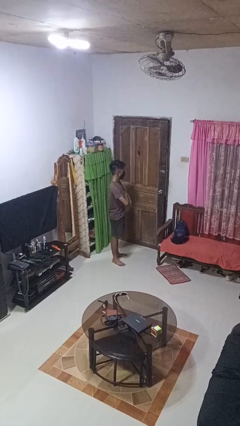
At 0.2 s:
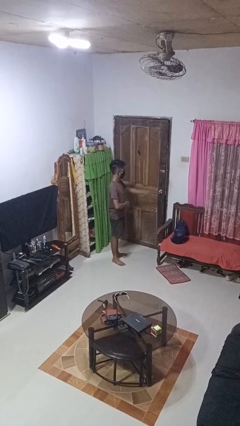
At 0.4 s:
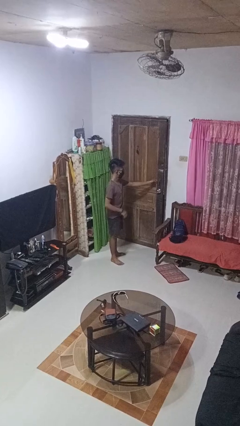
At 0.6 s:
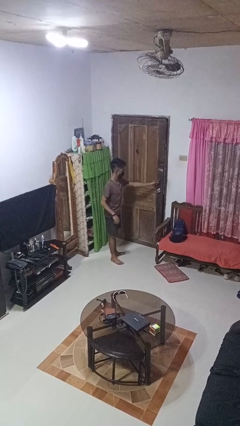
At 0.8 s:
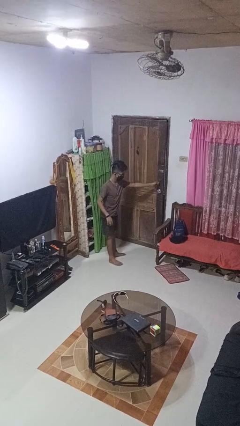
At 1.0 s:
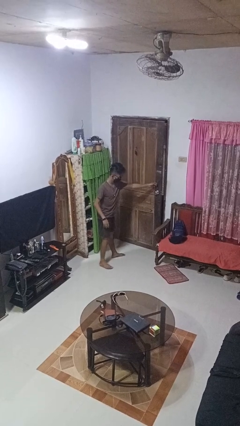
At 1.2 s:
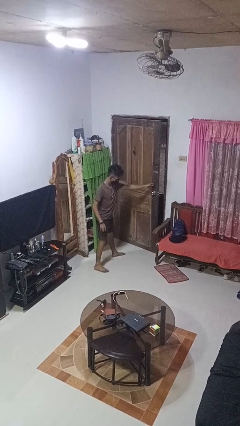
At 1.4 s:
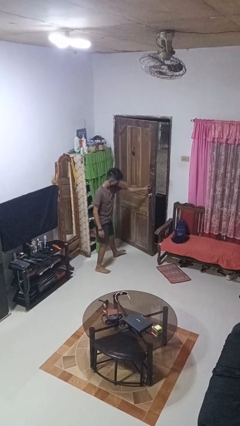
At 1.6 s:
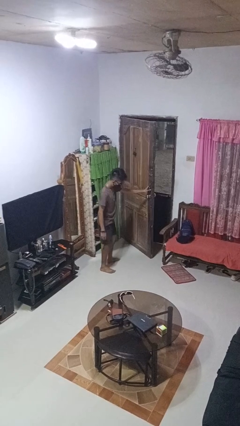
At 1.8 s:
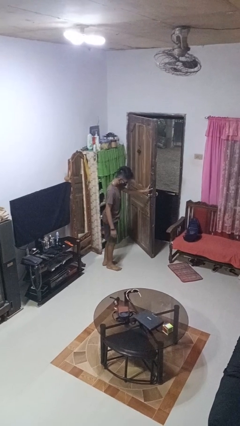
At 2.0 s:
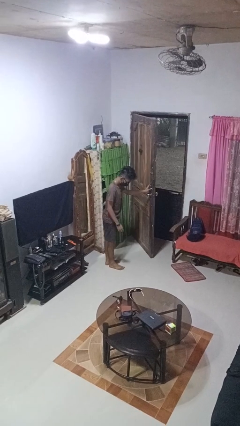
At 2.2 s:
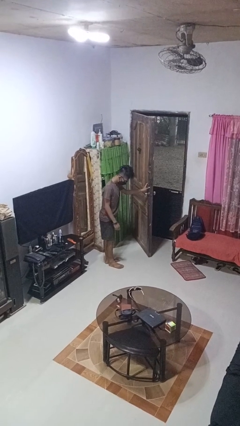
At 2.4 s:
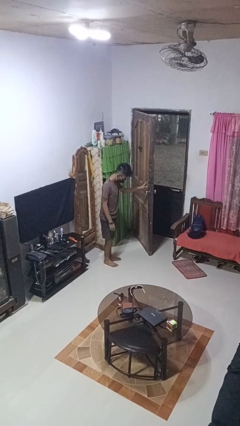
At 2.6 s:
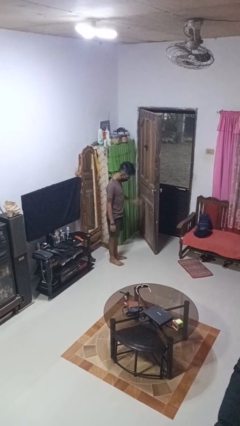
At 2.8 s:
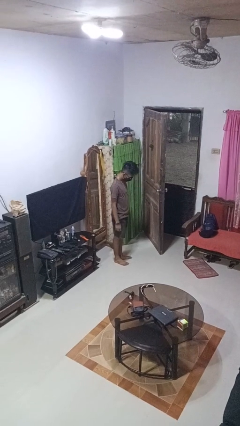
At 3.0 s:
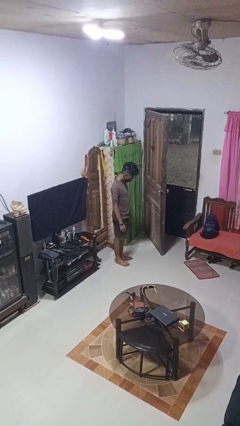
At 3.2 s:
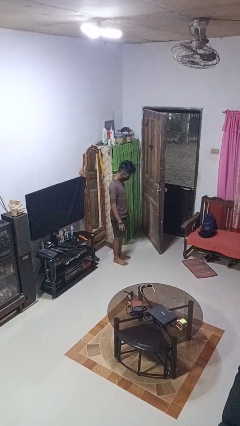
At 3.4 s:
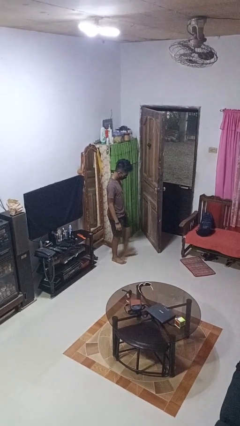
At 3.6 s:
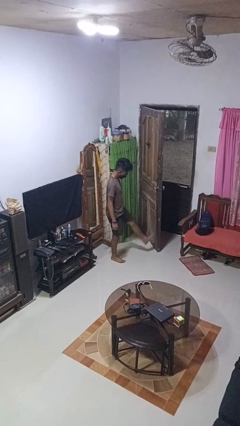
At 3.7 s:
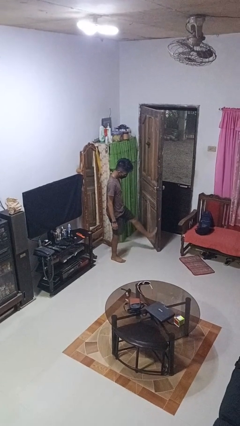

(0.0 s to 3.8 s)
person opens facility door

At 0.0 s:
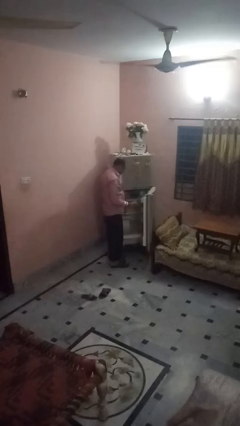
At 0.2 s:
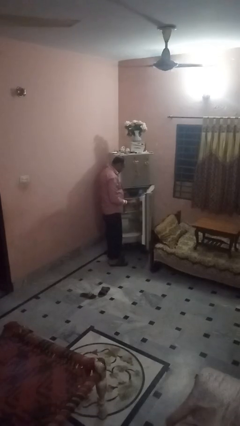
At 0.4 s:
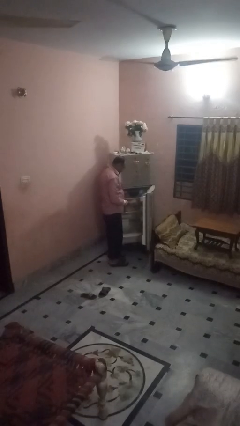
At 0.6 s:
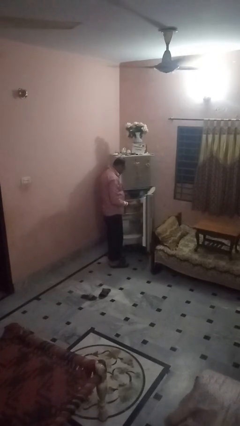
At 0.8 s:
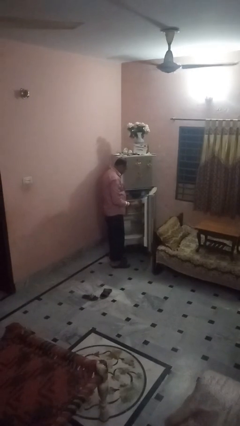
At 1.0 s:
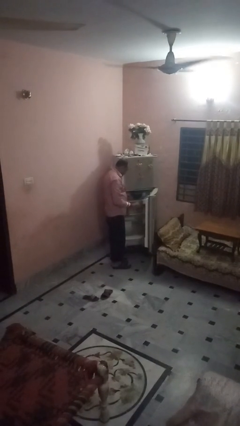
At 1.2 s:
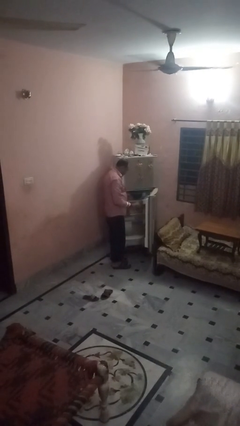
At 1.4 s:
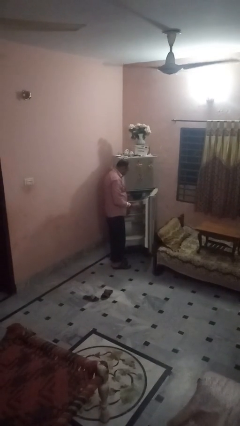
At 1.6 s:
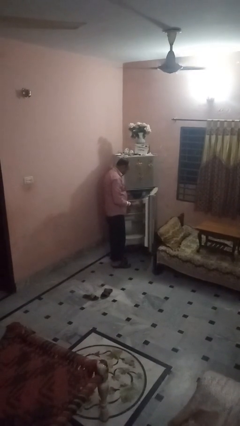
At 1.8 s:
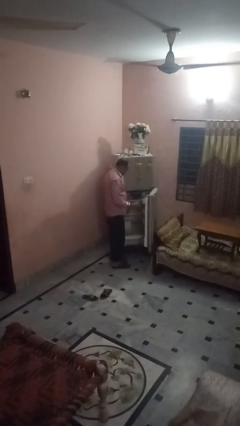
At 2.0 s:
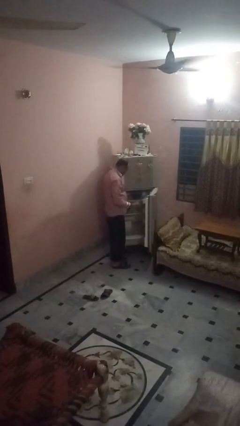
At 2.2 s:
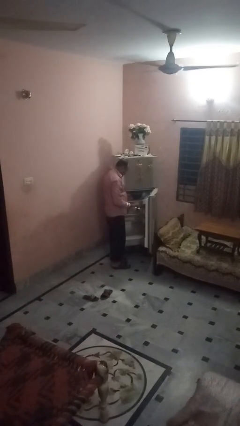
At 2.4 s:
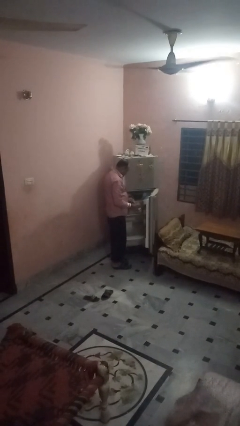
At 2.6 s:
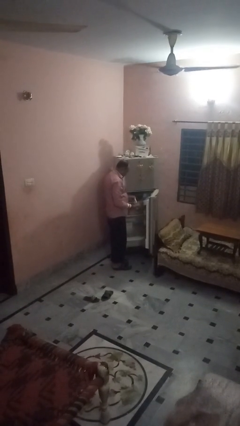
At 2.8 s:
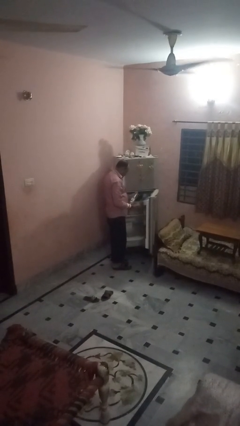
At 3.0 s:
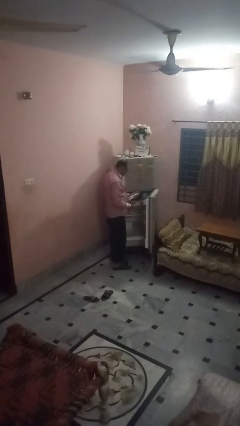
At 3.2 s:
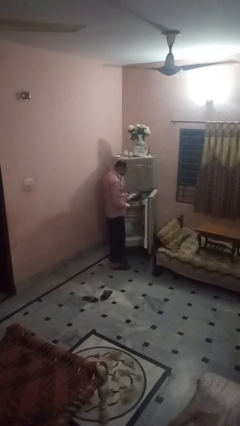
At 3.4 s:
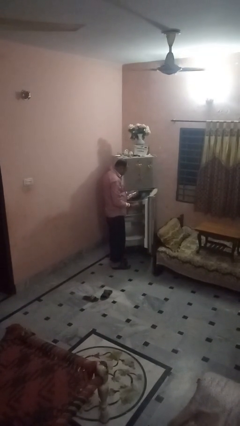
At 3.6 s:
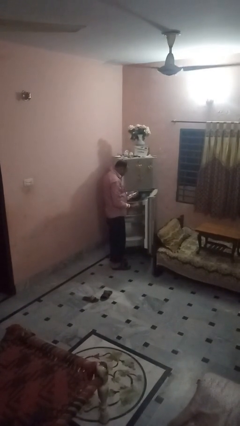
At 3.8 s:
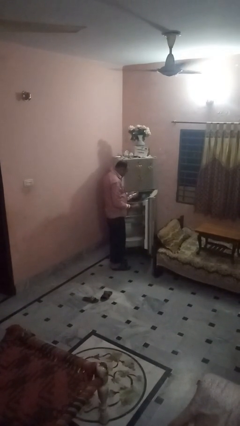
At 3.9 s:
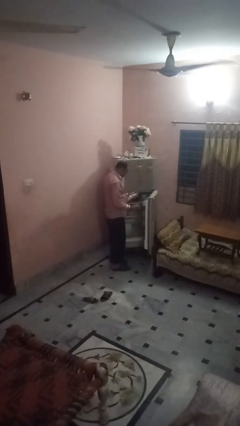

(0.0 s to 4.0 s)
person puts object into refrigerator

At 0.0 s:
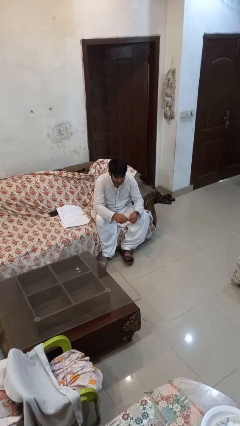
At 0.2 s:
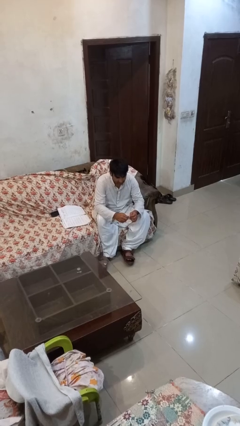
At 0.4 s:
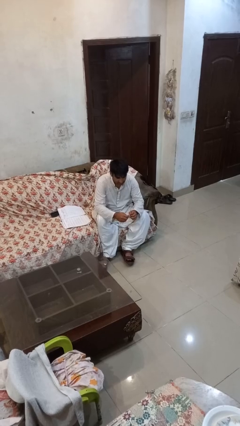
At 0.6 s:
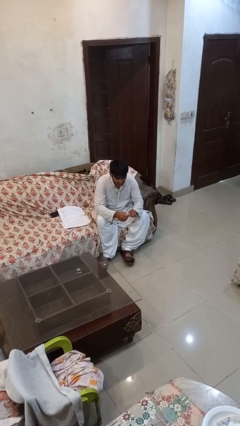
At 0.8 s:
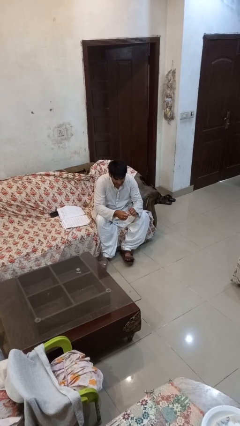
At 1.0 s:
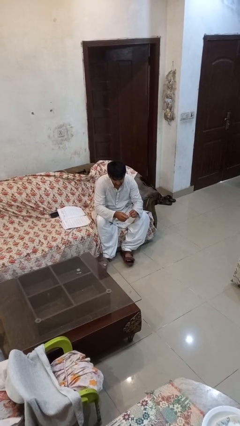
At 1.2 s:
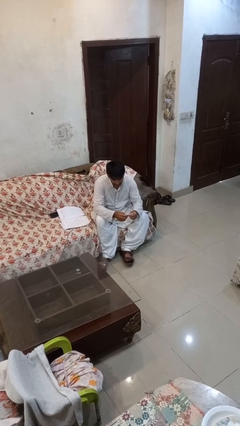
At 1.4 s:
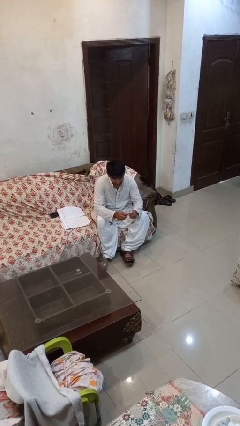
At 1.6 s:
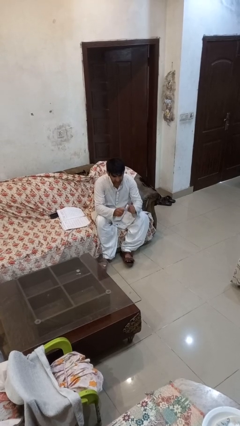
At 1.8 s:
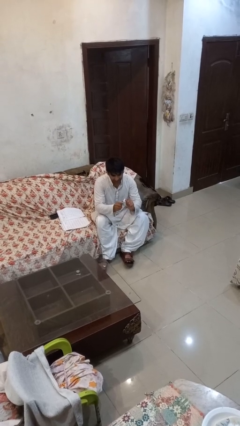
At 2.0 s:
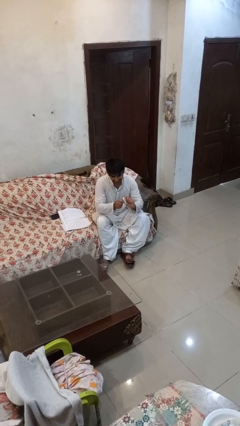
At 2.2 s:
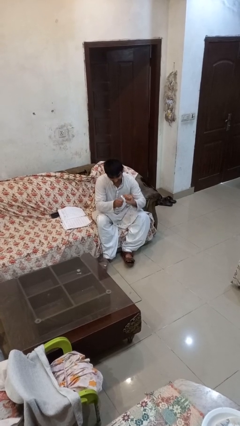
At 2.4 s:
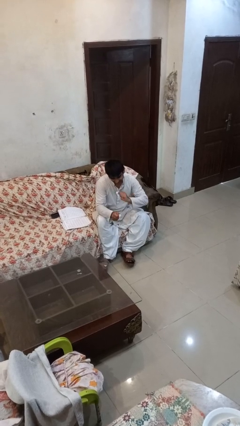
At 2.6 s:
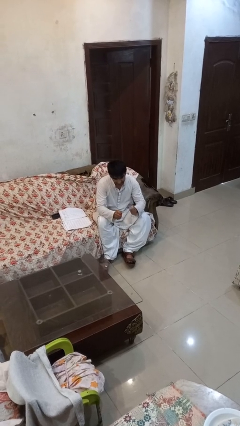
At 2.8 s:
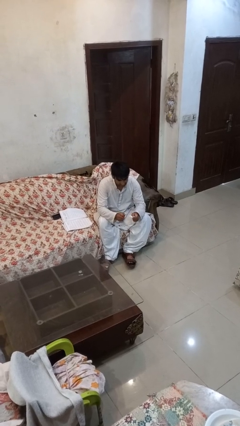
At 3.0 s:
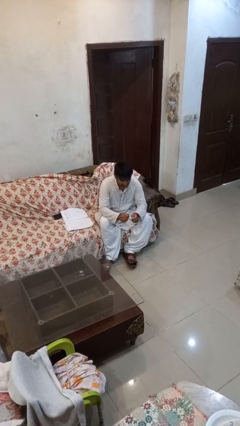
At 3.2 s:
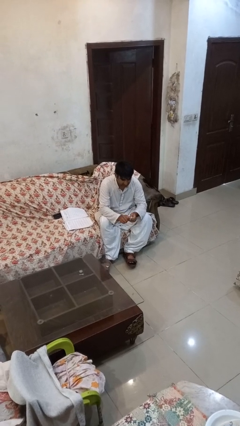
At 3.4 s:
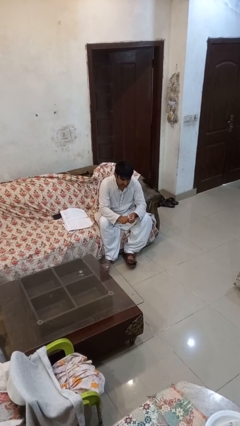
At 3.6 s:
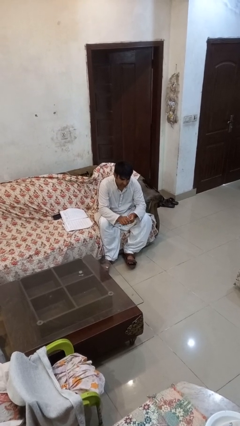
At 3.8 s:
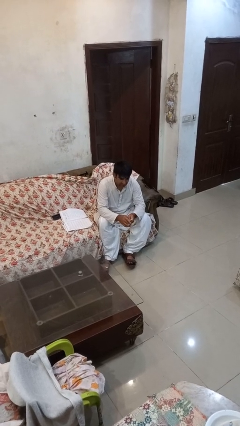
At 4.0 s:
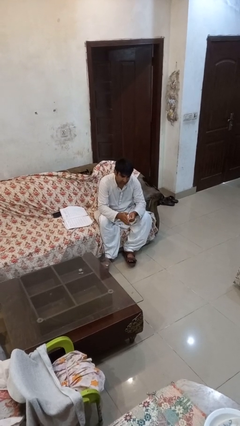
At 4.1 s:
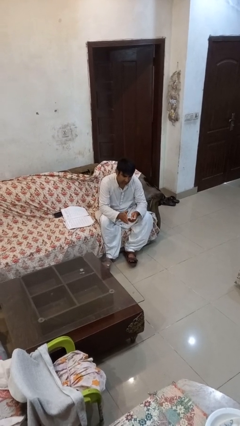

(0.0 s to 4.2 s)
person tears paper

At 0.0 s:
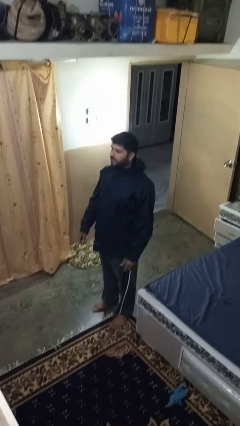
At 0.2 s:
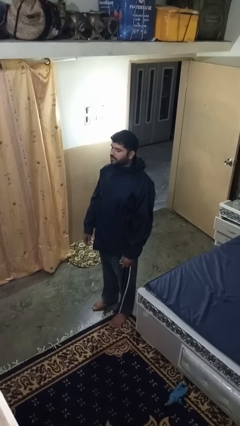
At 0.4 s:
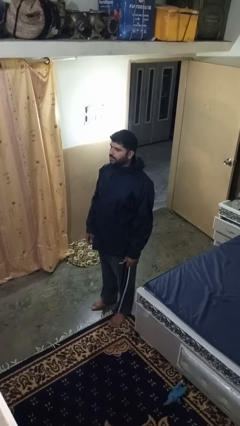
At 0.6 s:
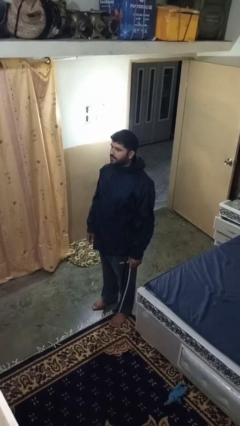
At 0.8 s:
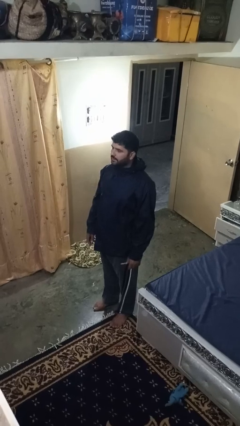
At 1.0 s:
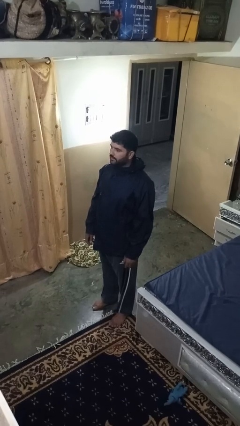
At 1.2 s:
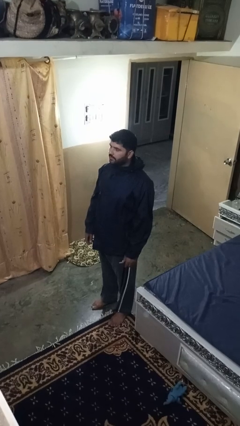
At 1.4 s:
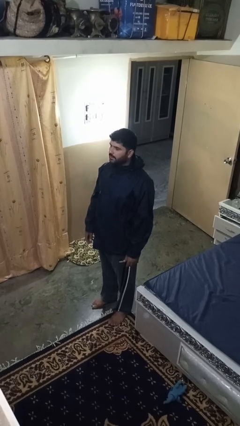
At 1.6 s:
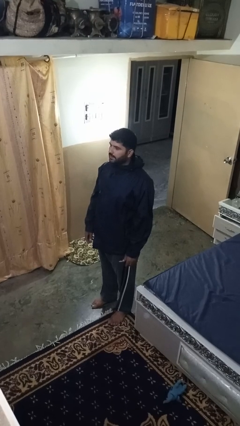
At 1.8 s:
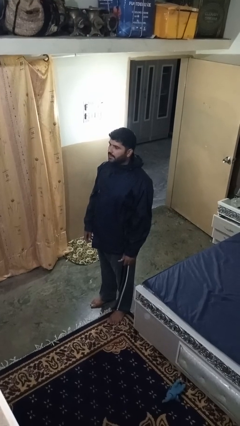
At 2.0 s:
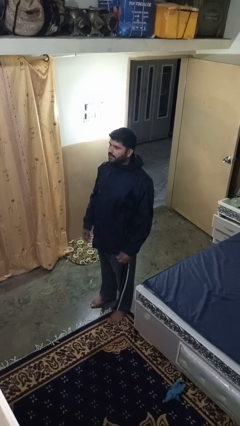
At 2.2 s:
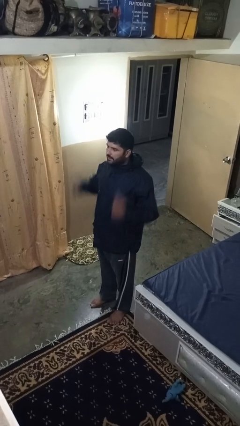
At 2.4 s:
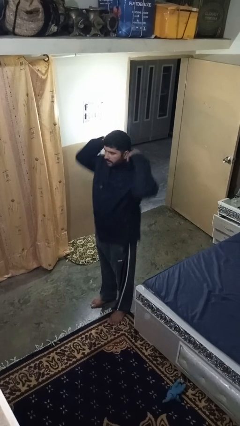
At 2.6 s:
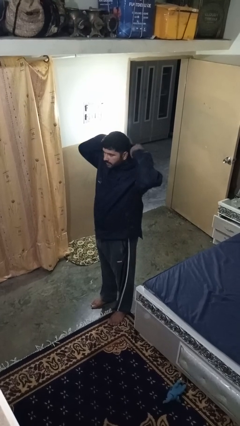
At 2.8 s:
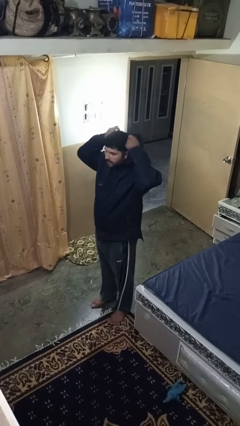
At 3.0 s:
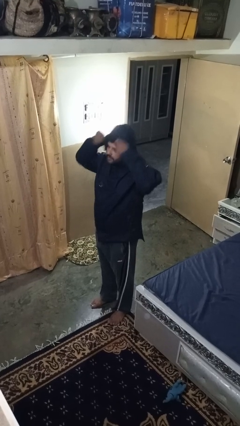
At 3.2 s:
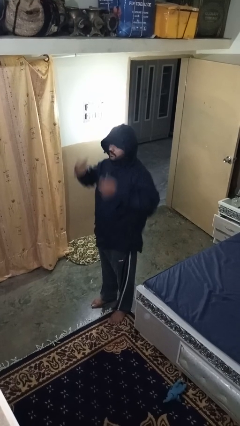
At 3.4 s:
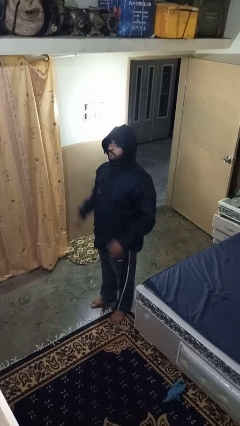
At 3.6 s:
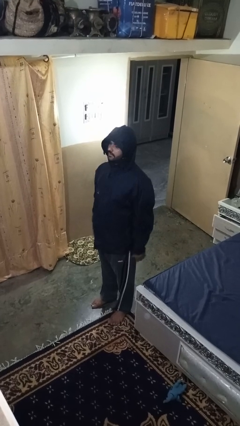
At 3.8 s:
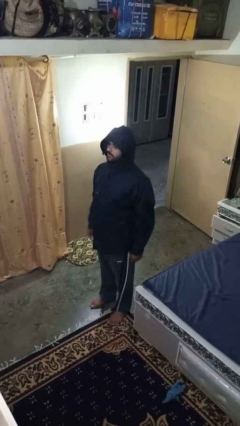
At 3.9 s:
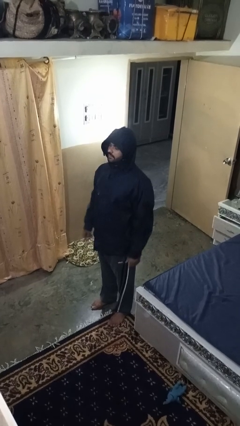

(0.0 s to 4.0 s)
person puts on hoodie

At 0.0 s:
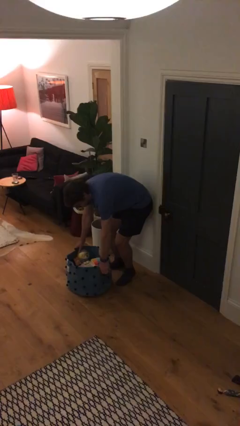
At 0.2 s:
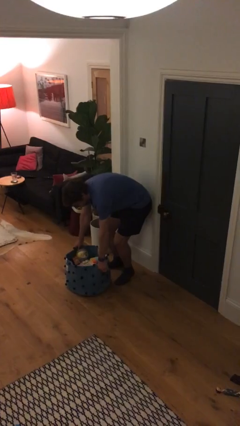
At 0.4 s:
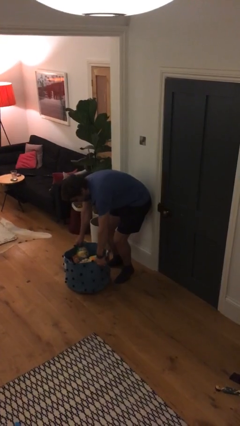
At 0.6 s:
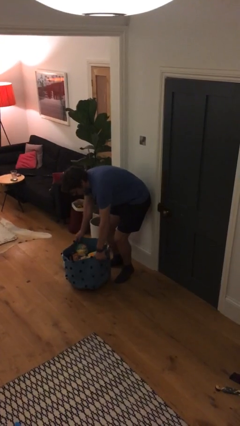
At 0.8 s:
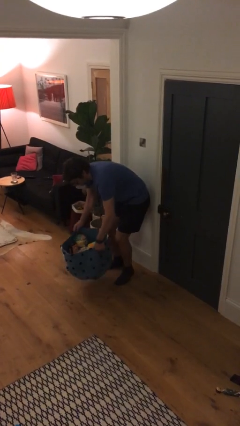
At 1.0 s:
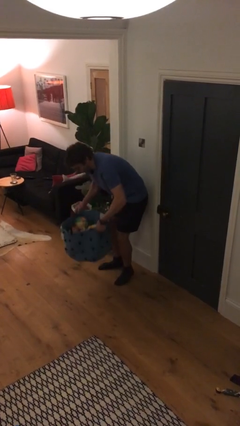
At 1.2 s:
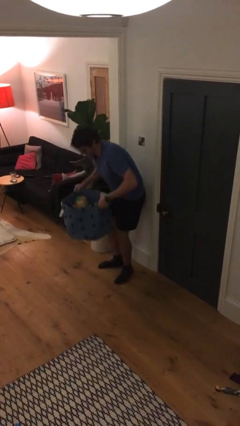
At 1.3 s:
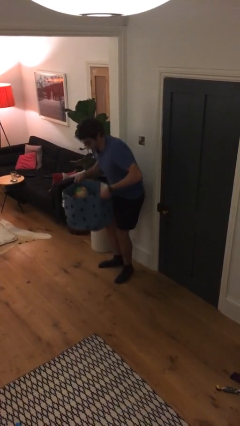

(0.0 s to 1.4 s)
person picks up object from floor

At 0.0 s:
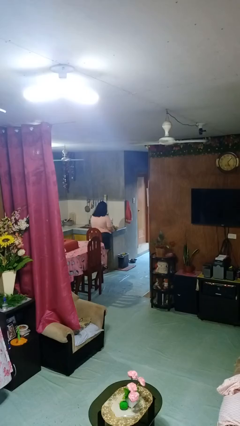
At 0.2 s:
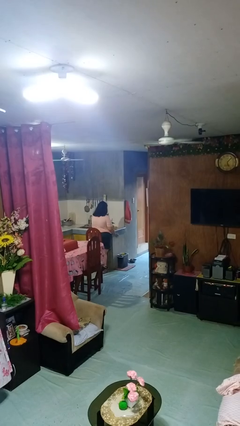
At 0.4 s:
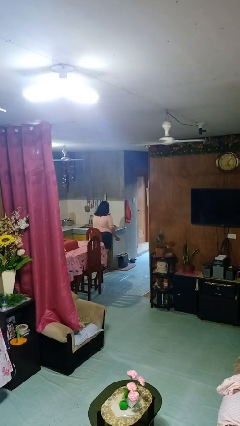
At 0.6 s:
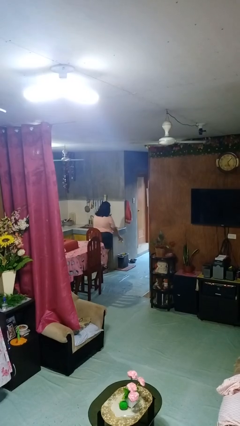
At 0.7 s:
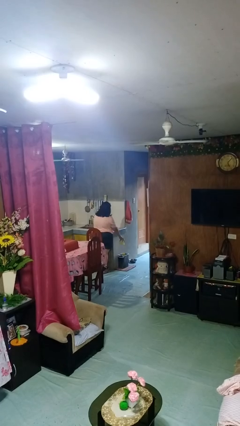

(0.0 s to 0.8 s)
person discards trash
